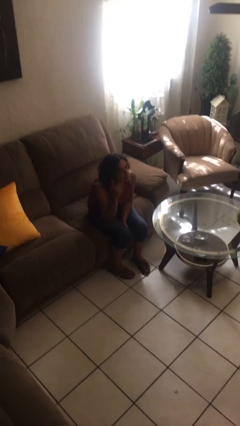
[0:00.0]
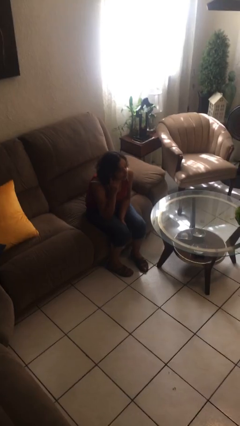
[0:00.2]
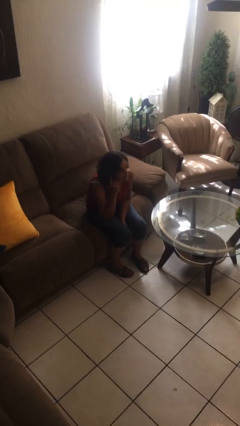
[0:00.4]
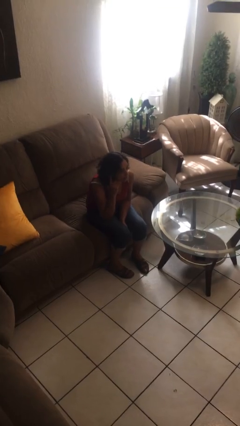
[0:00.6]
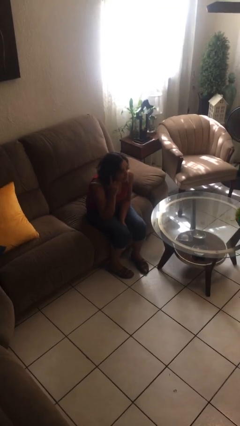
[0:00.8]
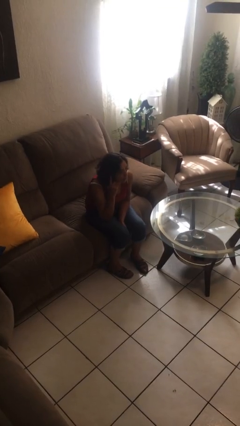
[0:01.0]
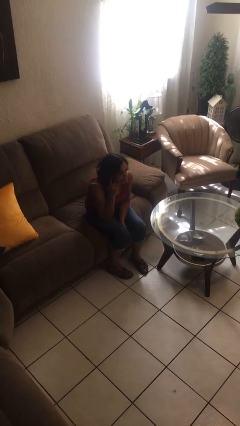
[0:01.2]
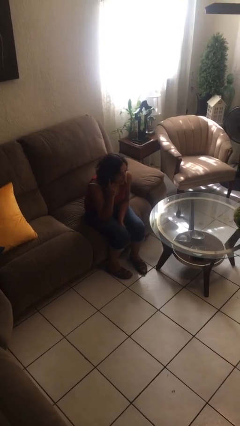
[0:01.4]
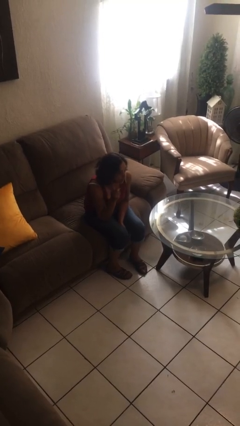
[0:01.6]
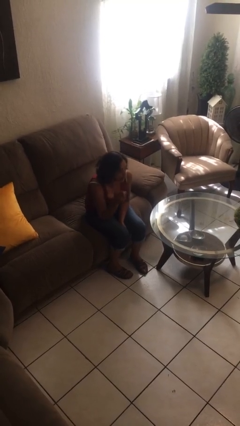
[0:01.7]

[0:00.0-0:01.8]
person gestures listen closely

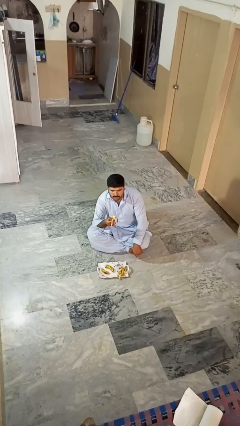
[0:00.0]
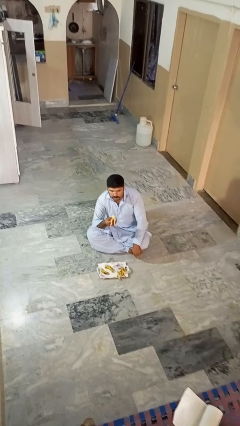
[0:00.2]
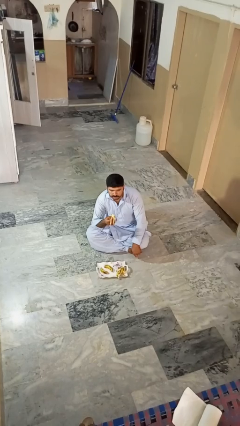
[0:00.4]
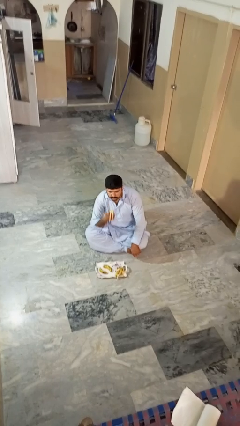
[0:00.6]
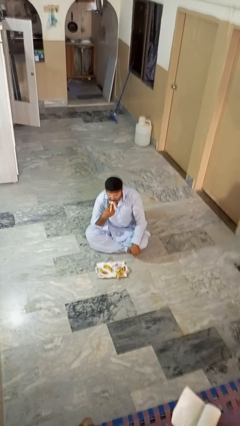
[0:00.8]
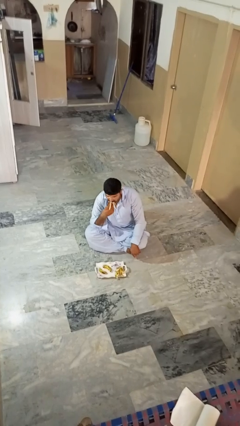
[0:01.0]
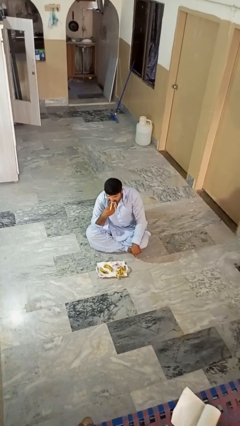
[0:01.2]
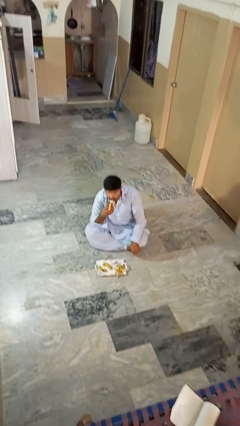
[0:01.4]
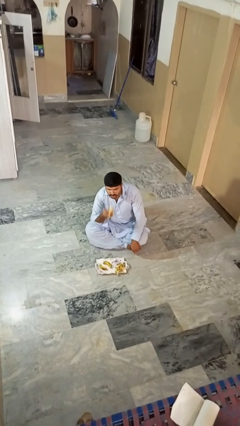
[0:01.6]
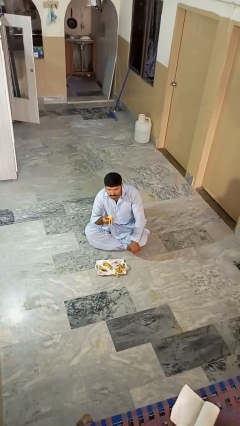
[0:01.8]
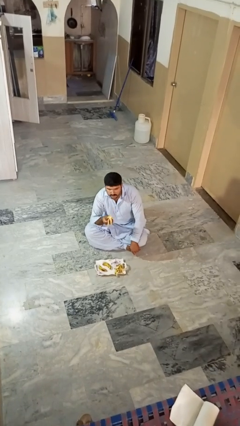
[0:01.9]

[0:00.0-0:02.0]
person eats banana

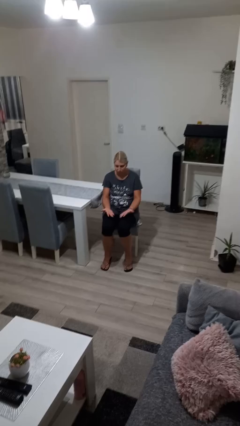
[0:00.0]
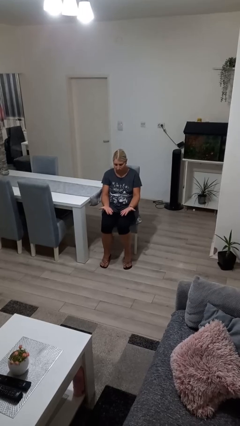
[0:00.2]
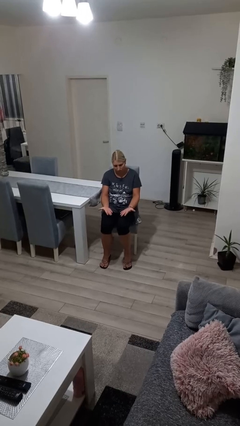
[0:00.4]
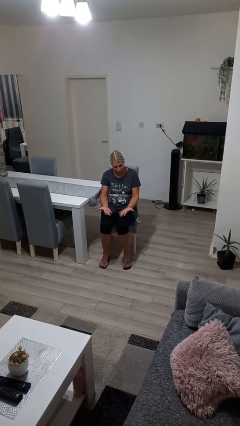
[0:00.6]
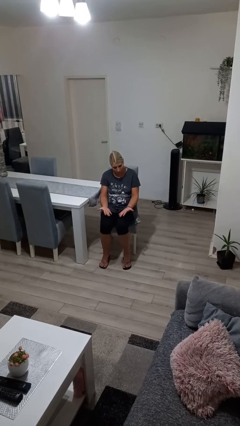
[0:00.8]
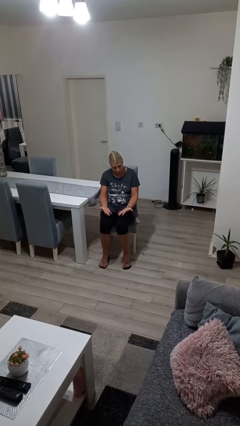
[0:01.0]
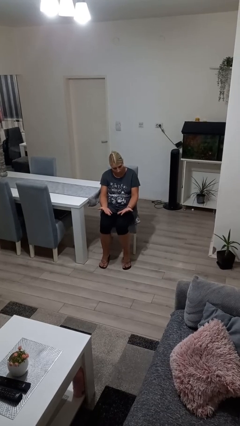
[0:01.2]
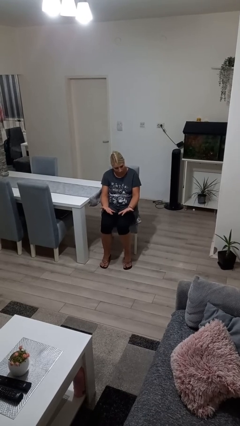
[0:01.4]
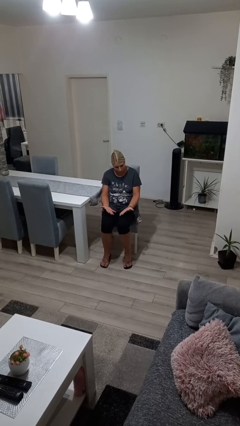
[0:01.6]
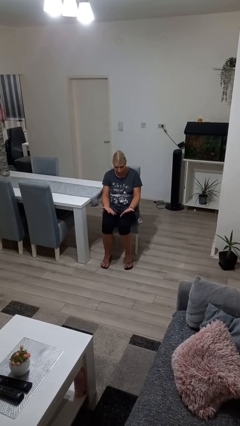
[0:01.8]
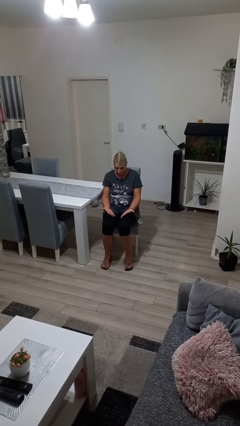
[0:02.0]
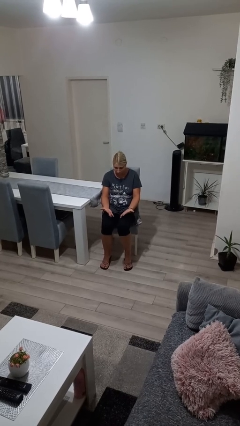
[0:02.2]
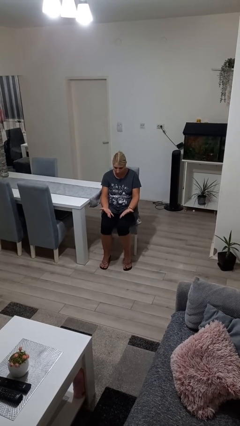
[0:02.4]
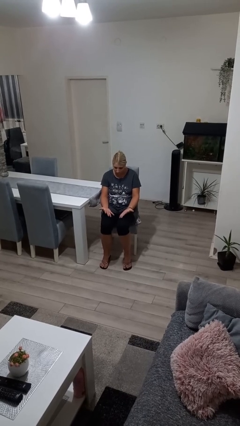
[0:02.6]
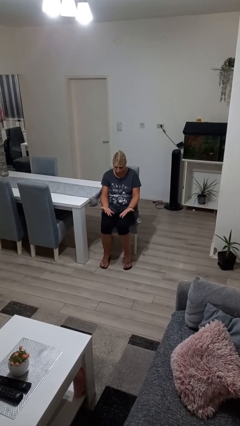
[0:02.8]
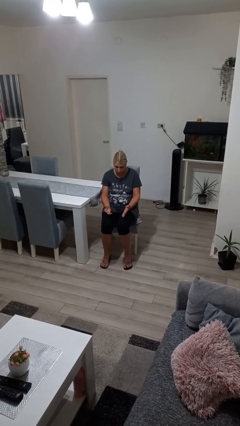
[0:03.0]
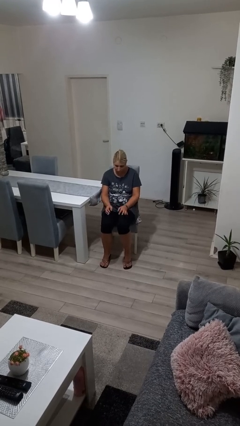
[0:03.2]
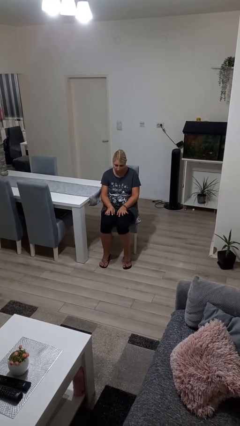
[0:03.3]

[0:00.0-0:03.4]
person looks at hands in lap

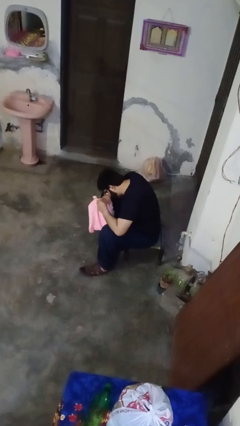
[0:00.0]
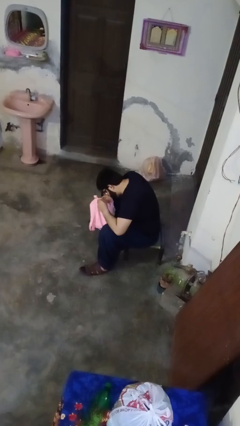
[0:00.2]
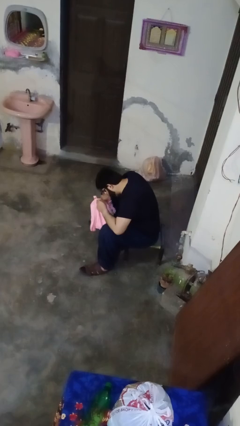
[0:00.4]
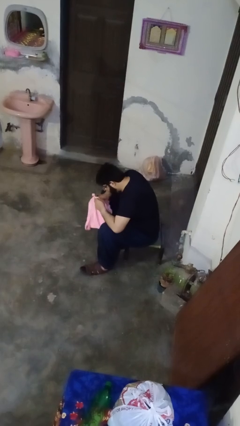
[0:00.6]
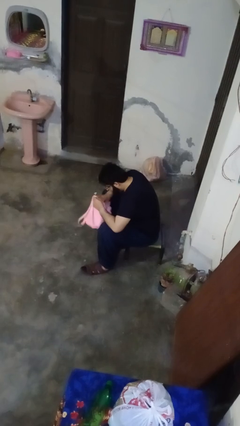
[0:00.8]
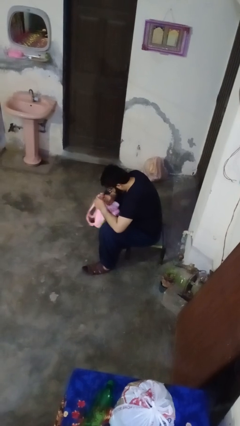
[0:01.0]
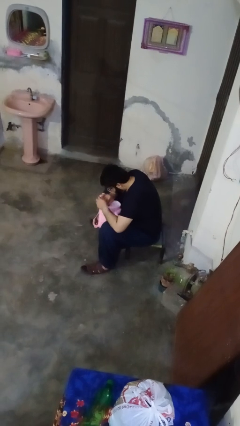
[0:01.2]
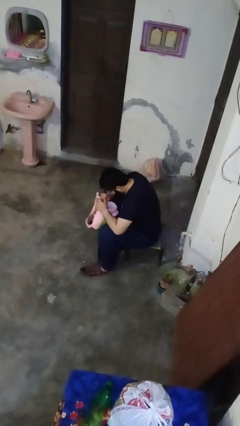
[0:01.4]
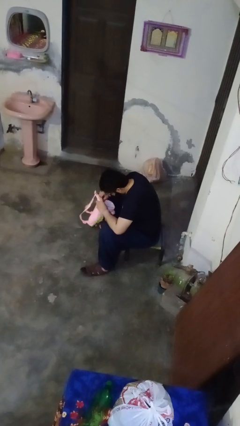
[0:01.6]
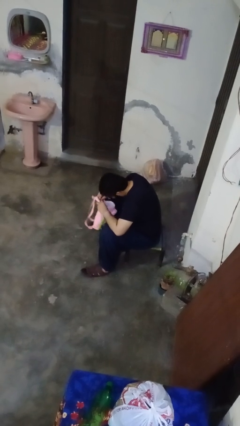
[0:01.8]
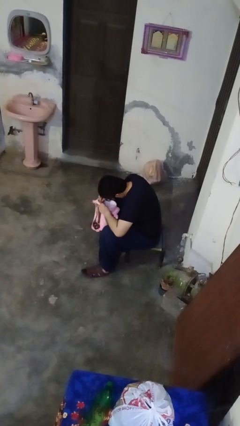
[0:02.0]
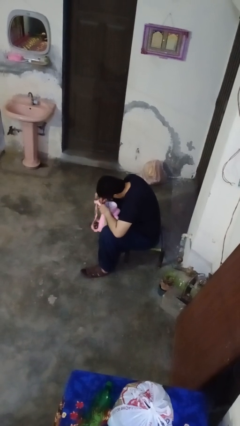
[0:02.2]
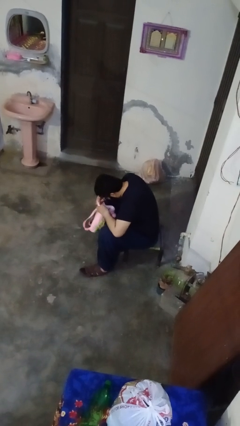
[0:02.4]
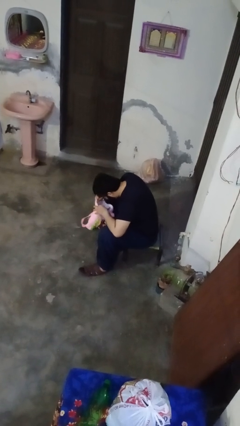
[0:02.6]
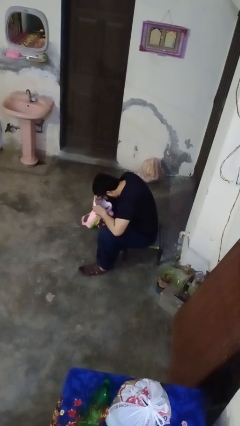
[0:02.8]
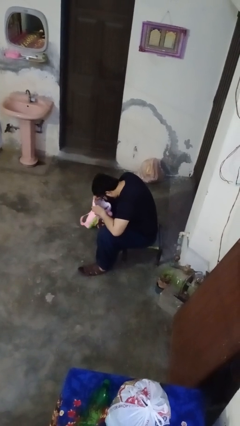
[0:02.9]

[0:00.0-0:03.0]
person searches in bag

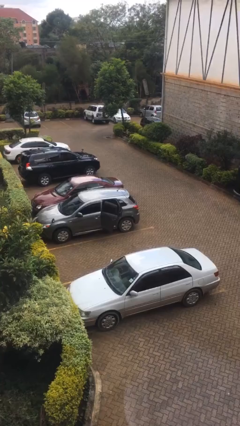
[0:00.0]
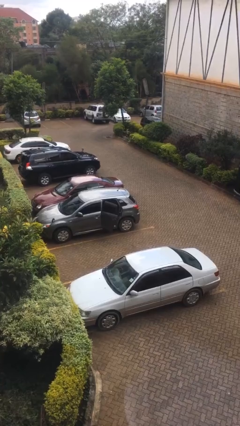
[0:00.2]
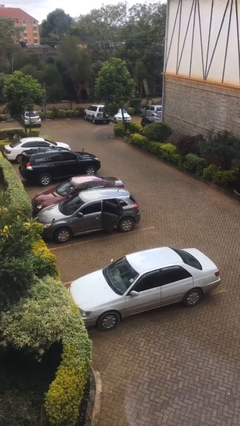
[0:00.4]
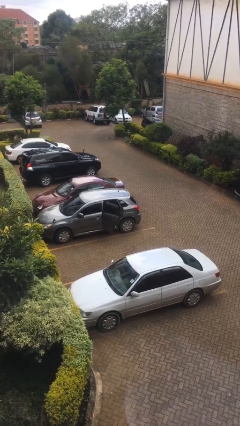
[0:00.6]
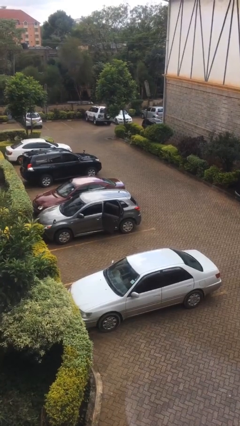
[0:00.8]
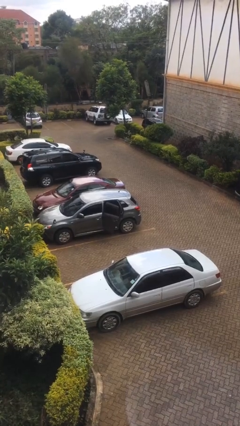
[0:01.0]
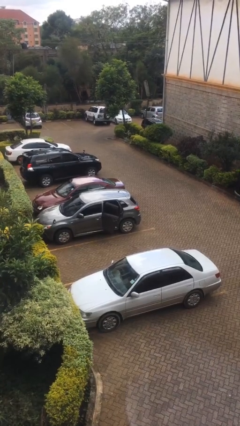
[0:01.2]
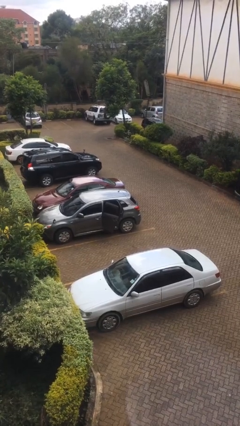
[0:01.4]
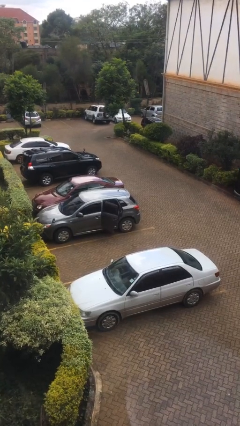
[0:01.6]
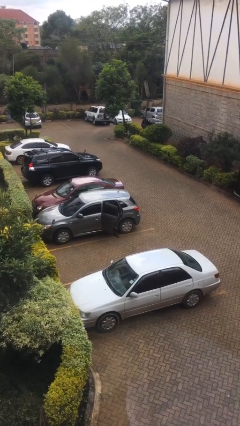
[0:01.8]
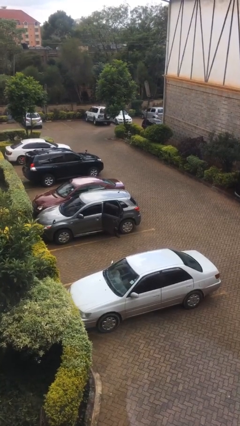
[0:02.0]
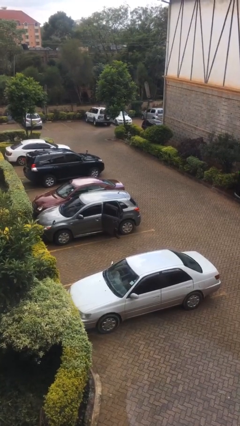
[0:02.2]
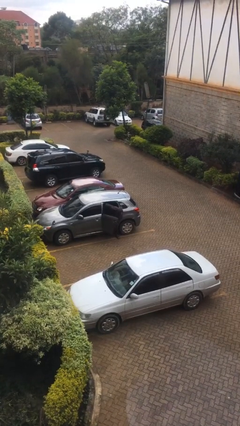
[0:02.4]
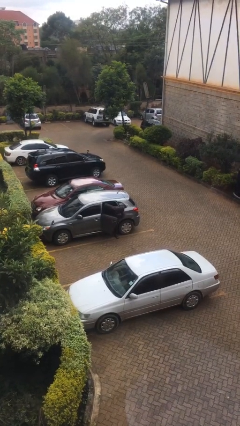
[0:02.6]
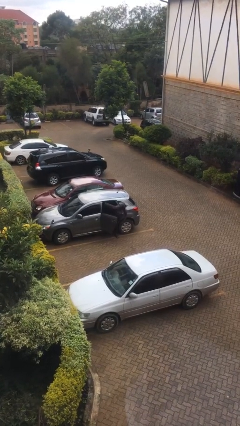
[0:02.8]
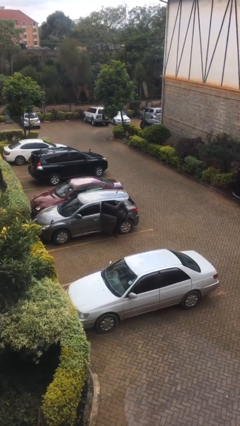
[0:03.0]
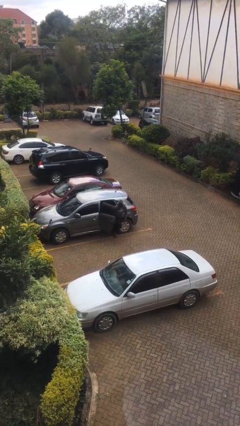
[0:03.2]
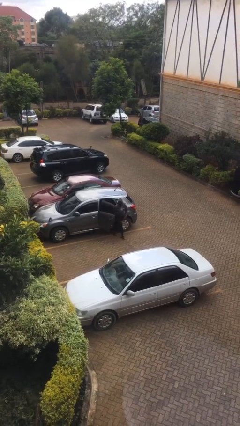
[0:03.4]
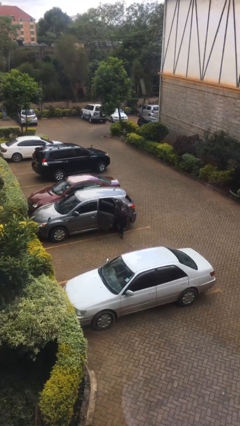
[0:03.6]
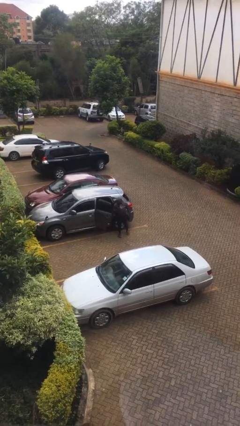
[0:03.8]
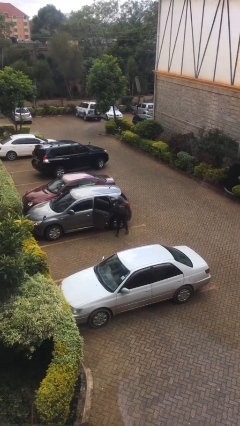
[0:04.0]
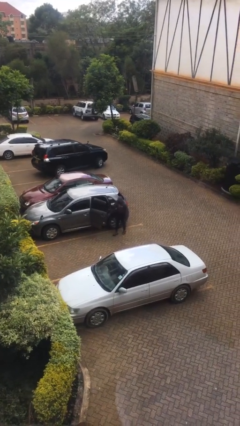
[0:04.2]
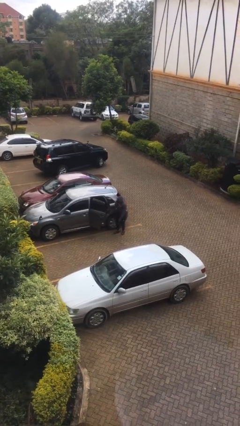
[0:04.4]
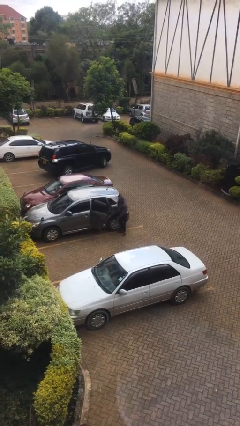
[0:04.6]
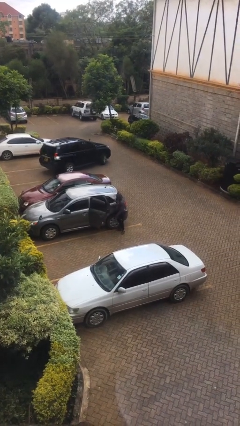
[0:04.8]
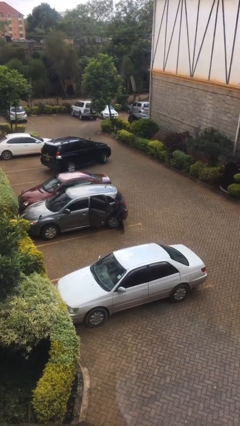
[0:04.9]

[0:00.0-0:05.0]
person exits car

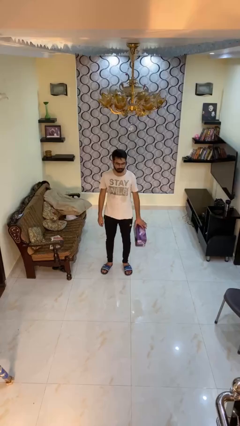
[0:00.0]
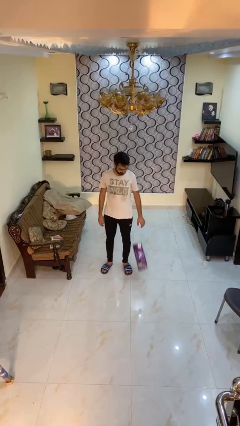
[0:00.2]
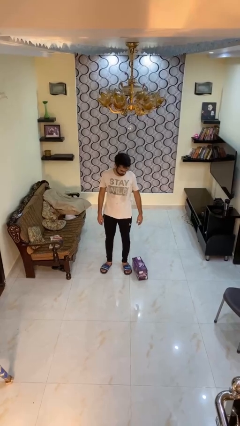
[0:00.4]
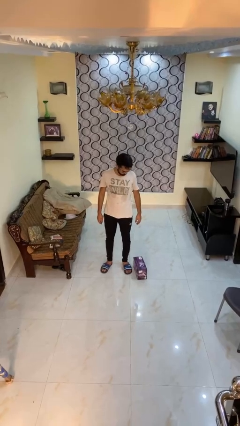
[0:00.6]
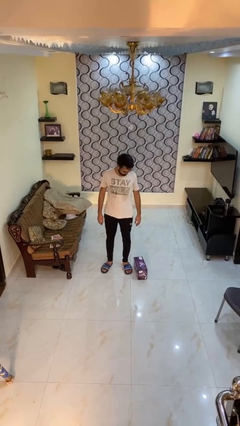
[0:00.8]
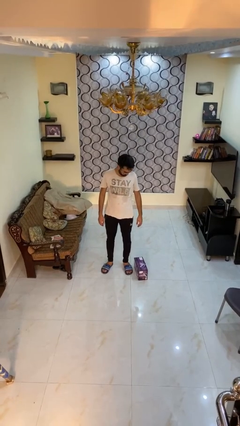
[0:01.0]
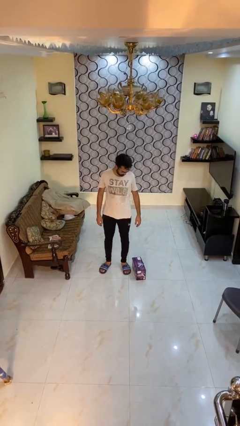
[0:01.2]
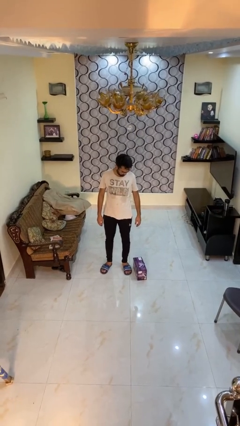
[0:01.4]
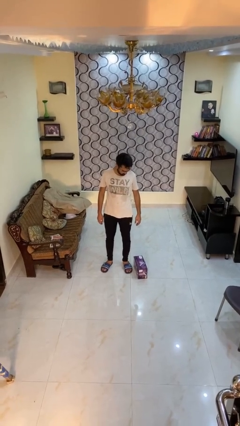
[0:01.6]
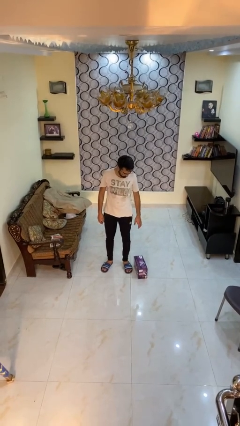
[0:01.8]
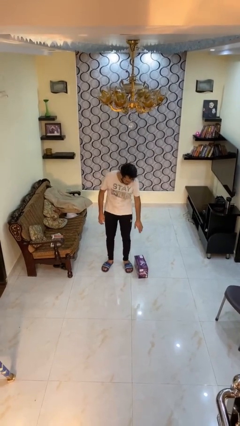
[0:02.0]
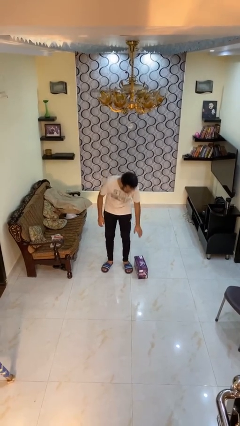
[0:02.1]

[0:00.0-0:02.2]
person drops object
